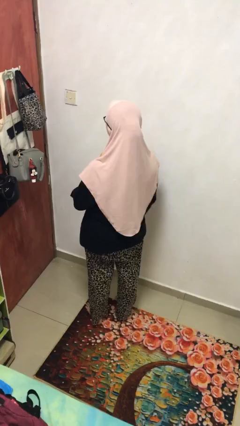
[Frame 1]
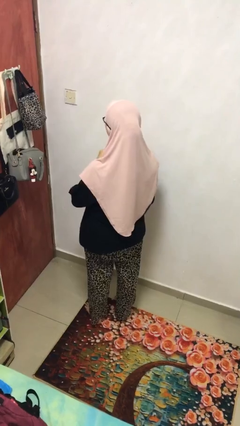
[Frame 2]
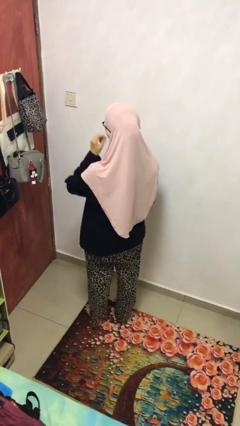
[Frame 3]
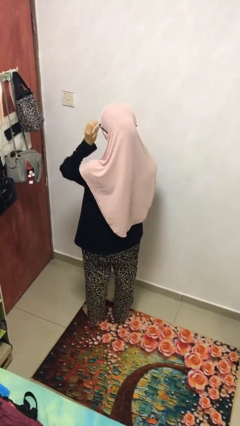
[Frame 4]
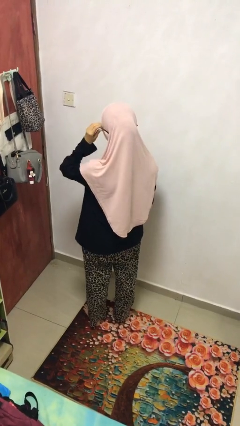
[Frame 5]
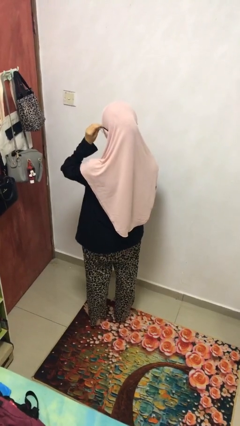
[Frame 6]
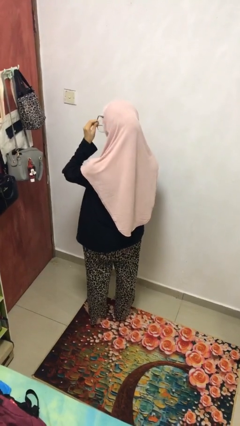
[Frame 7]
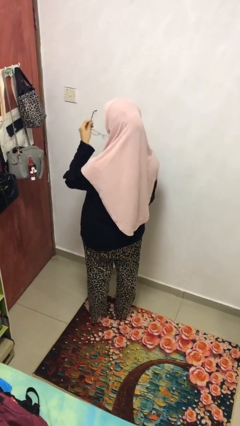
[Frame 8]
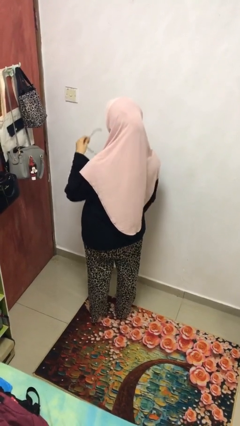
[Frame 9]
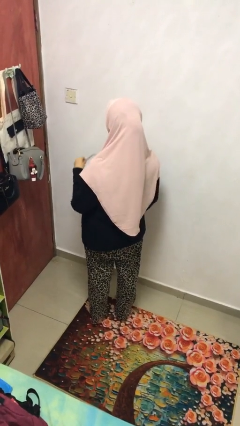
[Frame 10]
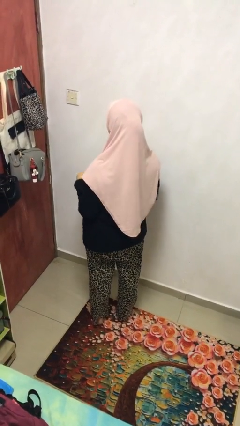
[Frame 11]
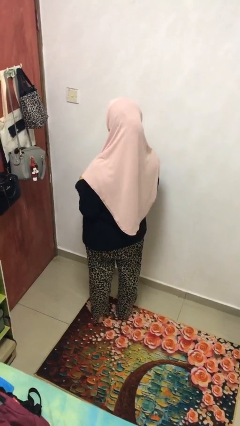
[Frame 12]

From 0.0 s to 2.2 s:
person takes off glasses

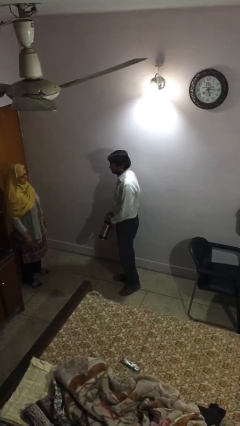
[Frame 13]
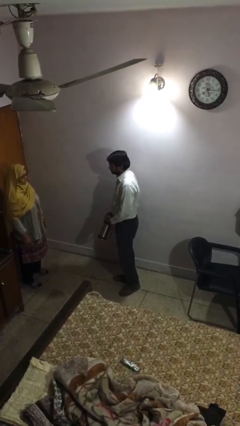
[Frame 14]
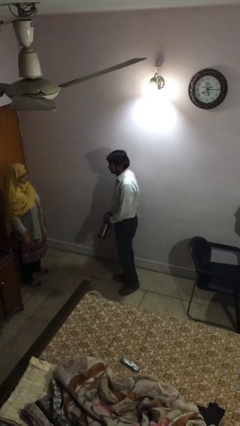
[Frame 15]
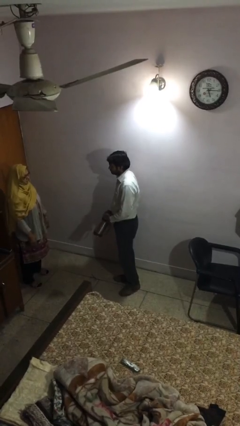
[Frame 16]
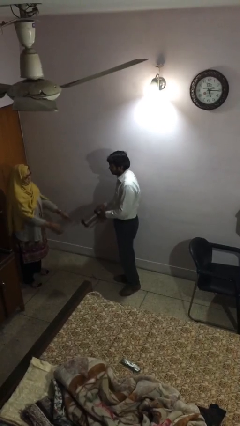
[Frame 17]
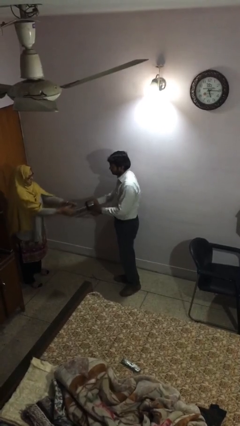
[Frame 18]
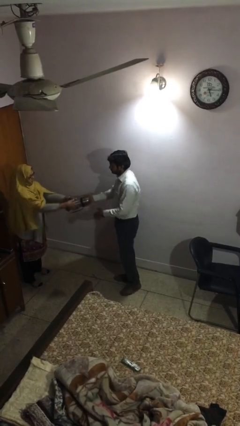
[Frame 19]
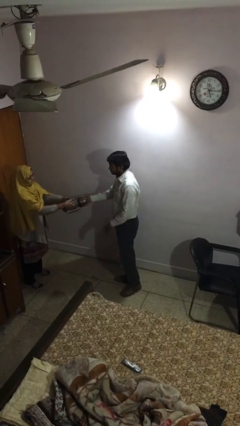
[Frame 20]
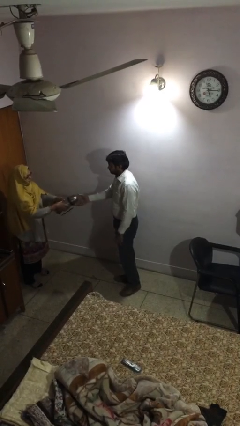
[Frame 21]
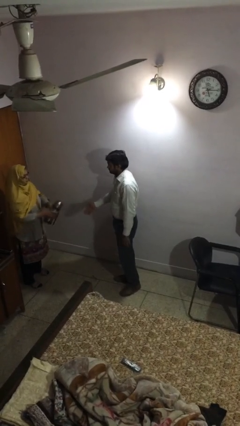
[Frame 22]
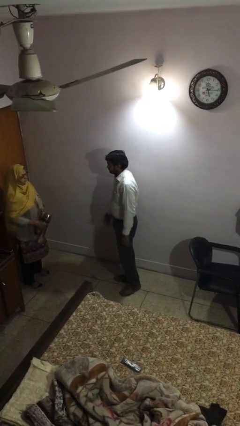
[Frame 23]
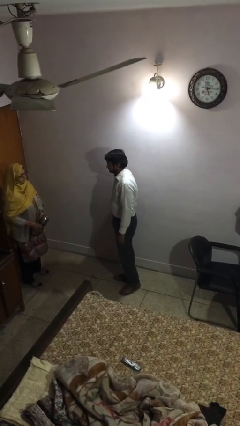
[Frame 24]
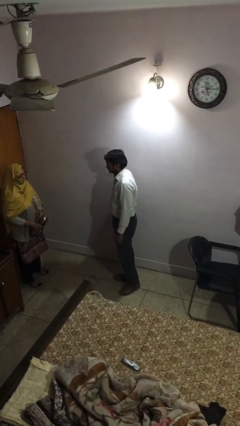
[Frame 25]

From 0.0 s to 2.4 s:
person transfers object to person

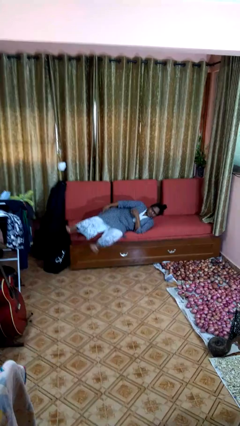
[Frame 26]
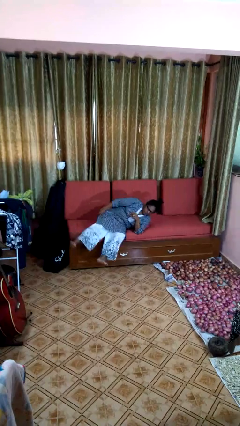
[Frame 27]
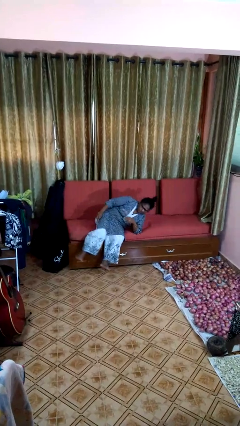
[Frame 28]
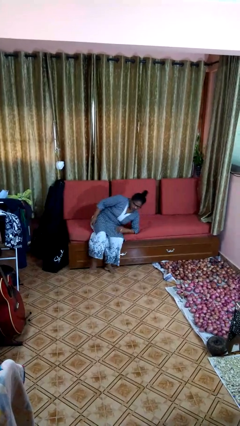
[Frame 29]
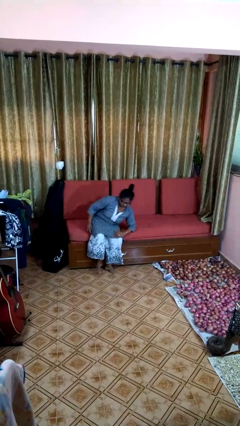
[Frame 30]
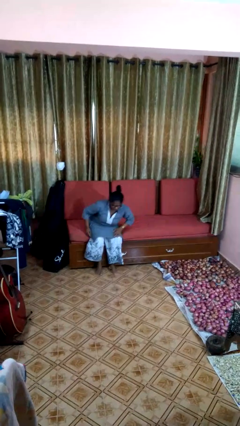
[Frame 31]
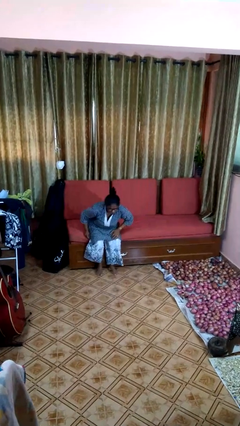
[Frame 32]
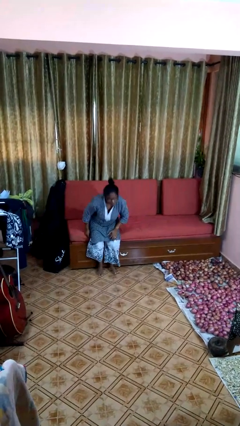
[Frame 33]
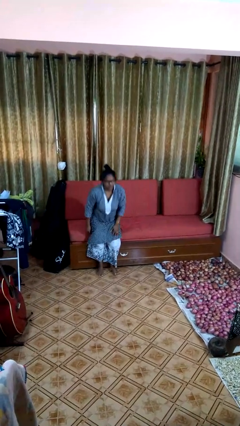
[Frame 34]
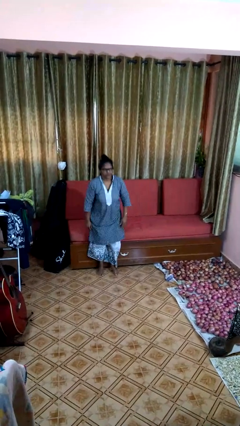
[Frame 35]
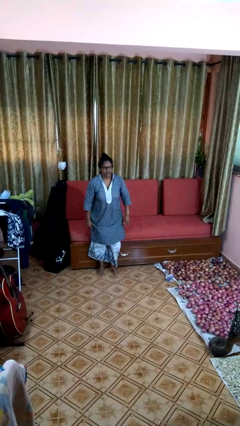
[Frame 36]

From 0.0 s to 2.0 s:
person stands up

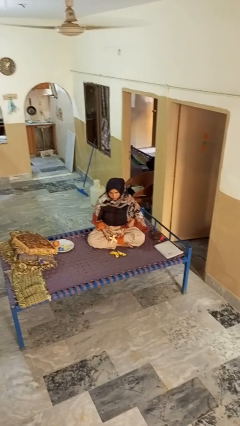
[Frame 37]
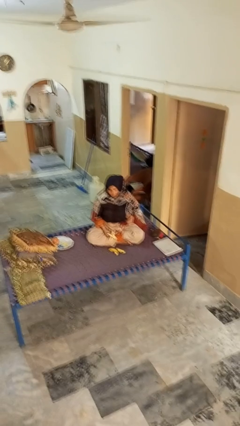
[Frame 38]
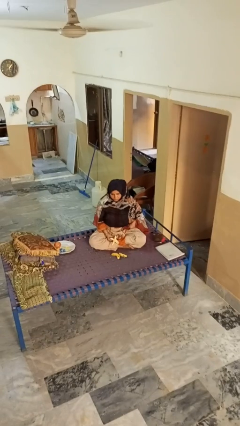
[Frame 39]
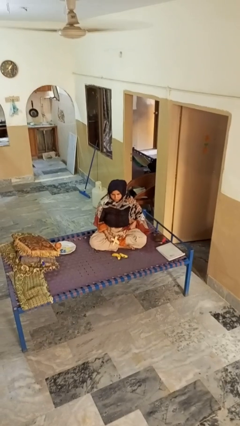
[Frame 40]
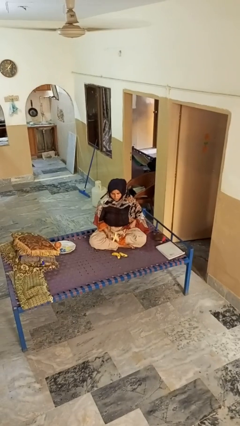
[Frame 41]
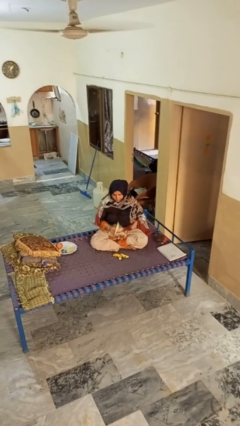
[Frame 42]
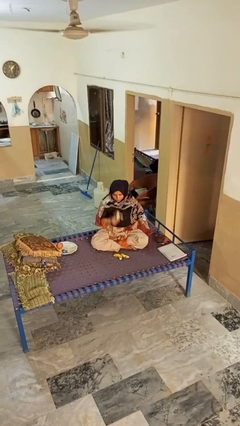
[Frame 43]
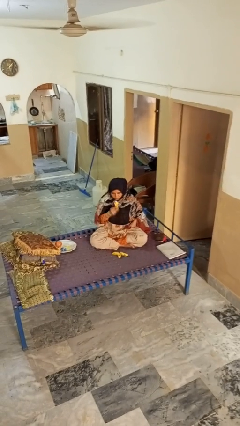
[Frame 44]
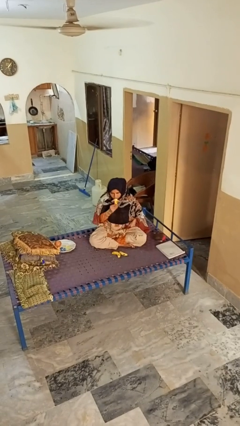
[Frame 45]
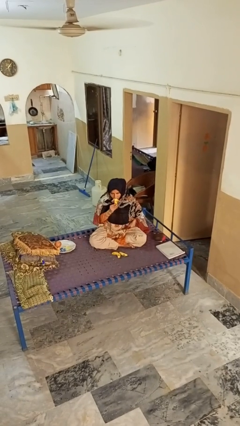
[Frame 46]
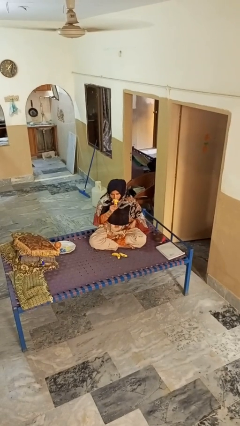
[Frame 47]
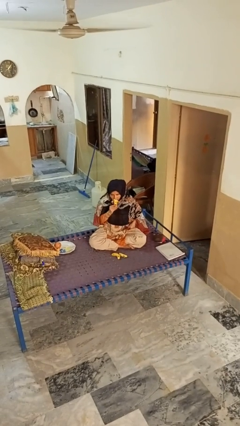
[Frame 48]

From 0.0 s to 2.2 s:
person eats banana

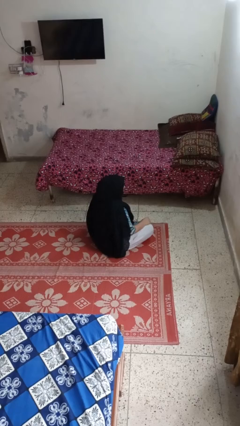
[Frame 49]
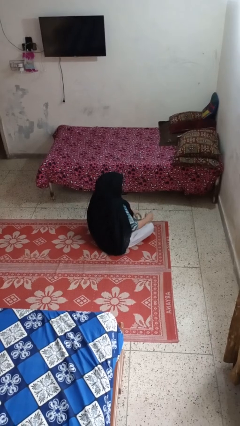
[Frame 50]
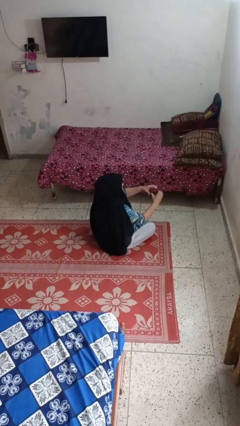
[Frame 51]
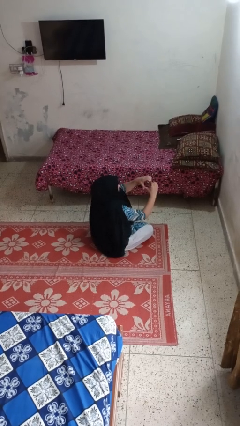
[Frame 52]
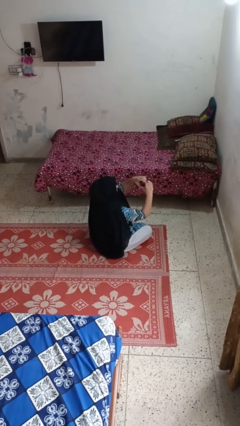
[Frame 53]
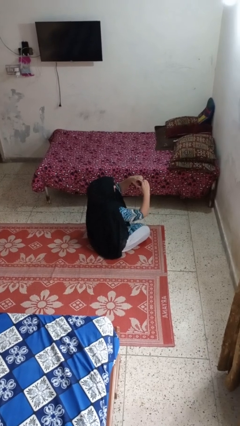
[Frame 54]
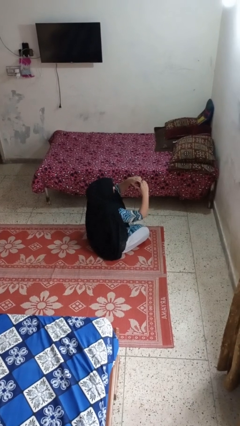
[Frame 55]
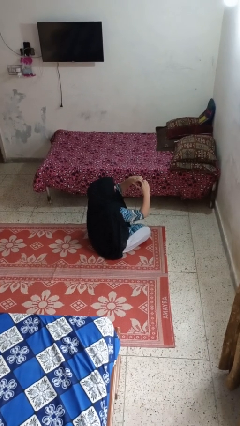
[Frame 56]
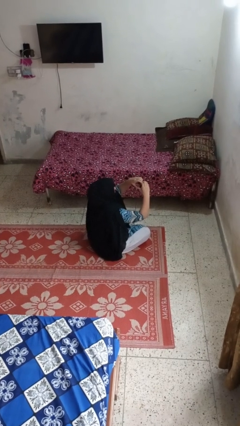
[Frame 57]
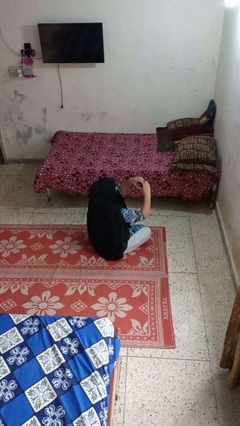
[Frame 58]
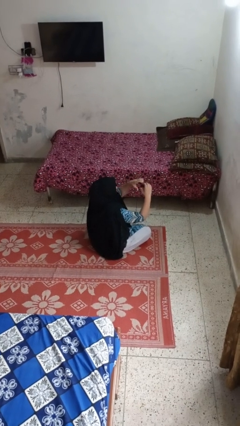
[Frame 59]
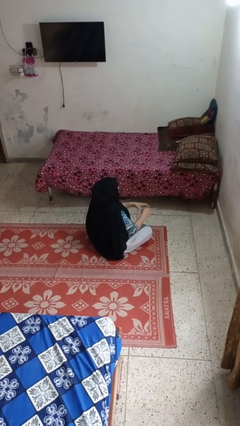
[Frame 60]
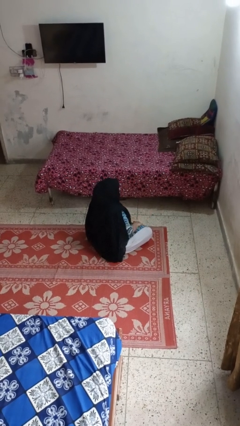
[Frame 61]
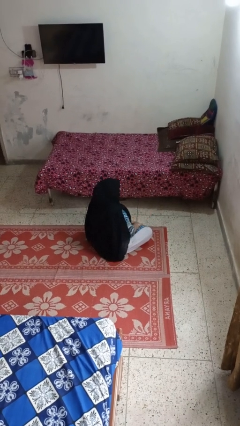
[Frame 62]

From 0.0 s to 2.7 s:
person gestures heart

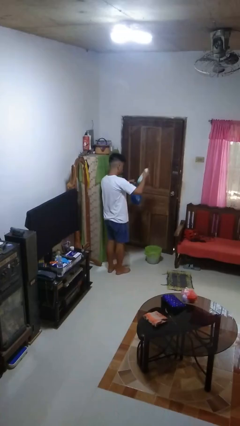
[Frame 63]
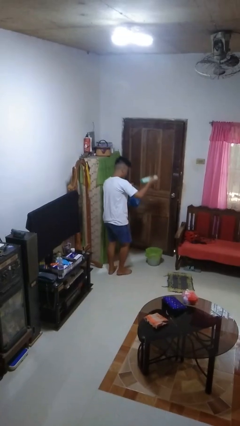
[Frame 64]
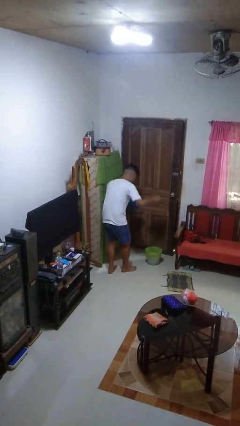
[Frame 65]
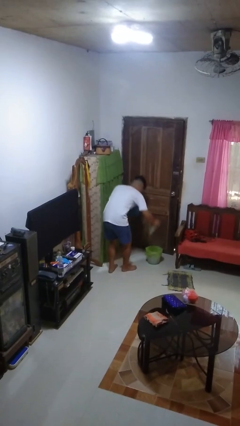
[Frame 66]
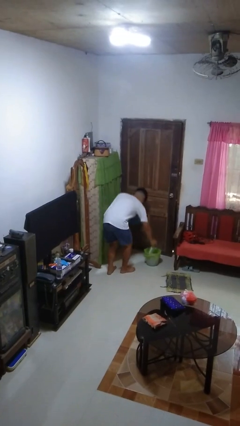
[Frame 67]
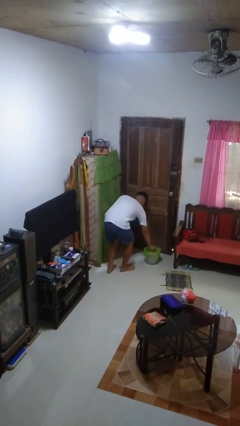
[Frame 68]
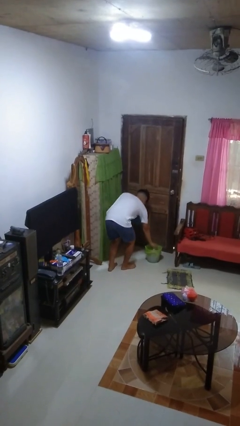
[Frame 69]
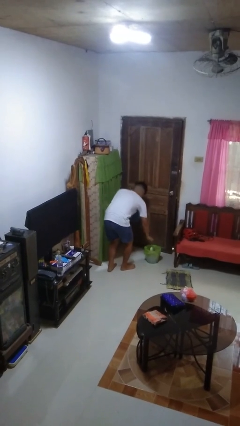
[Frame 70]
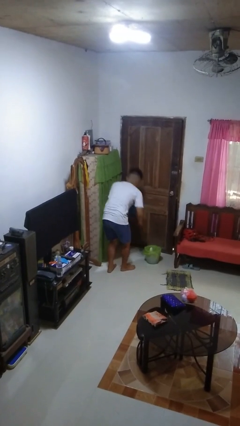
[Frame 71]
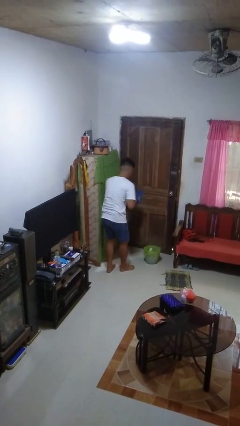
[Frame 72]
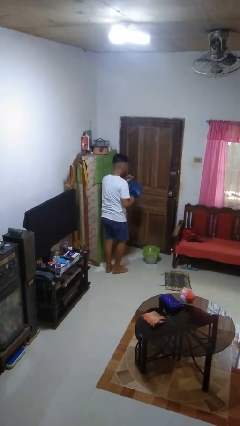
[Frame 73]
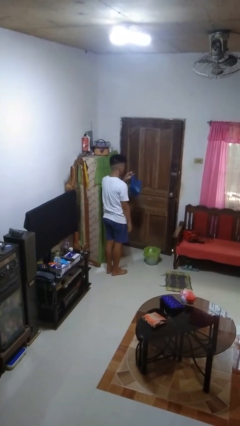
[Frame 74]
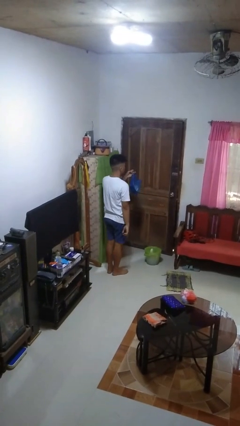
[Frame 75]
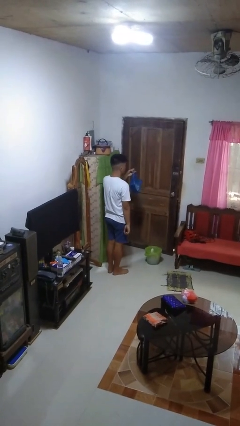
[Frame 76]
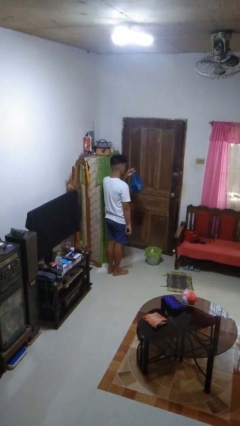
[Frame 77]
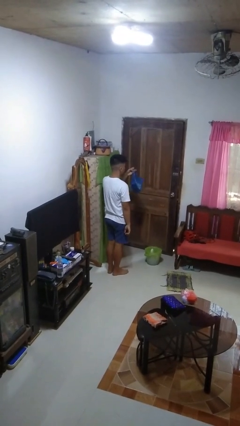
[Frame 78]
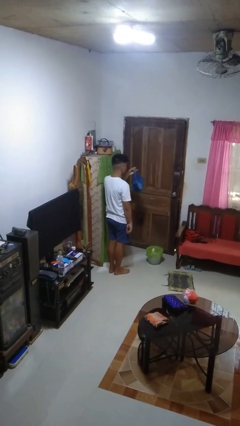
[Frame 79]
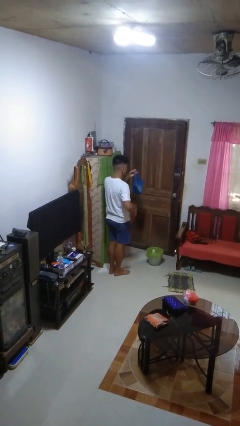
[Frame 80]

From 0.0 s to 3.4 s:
person discards trash

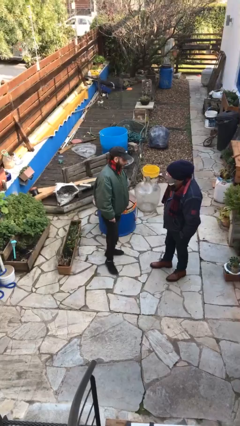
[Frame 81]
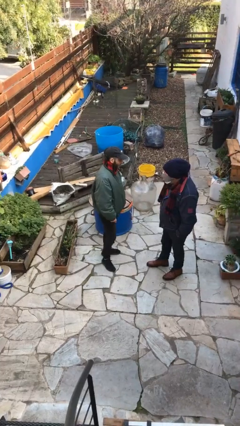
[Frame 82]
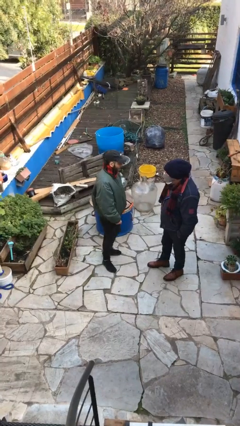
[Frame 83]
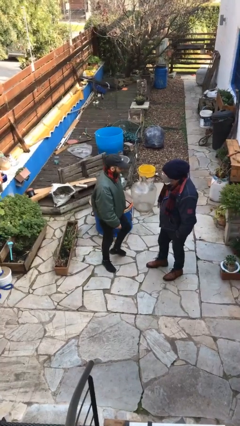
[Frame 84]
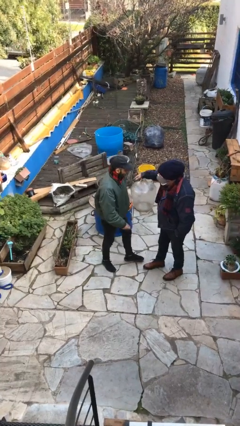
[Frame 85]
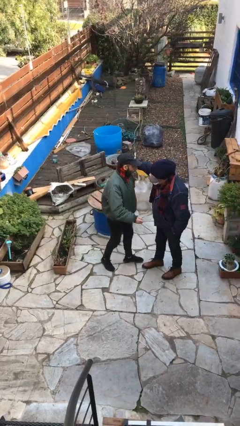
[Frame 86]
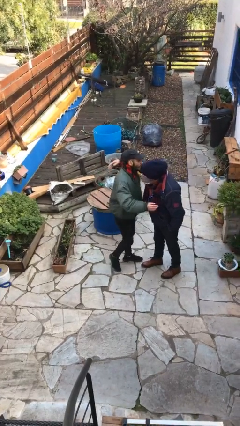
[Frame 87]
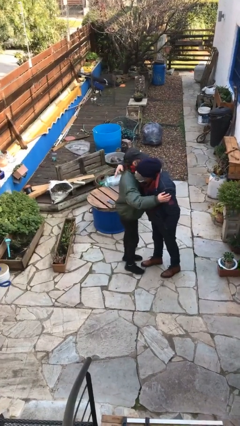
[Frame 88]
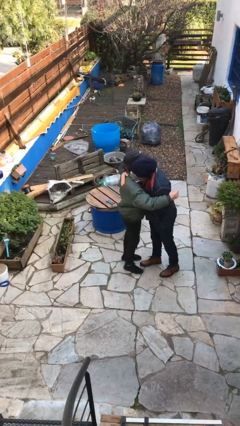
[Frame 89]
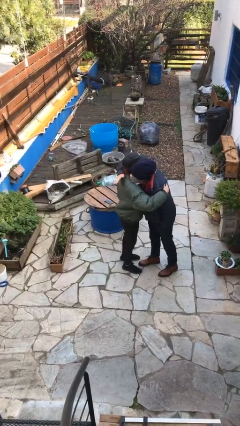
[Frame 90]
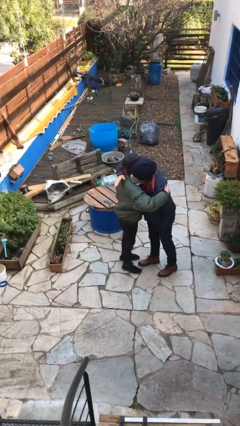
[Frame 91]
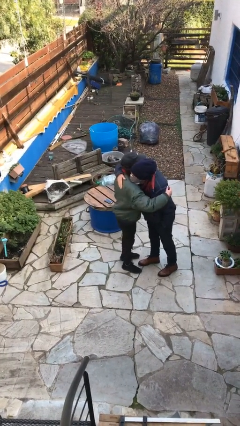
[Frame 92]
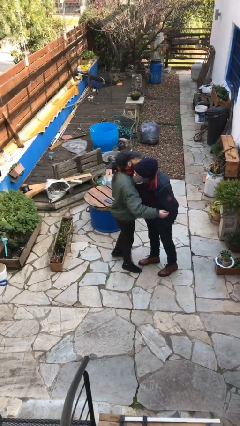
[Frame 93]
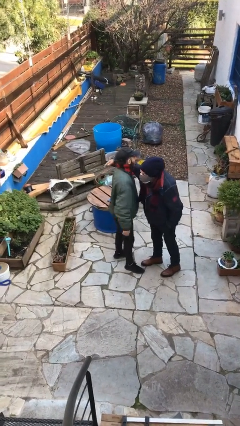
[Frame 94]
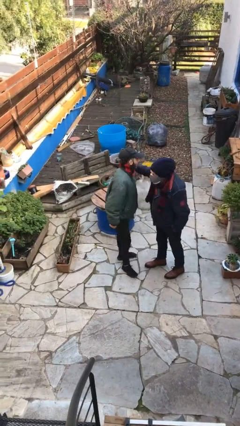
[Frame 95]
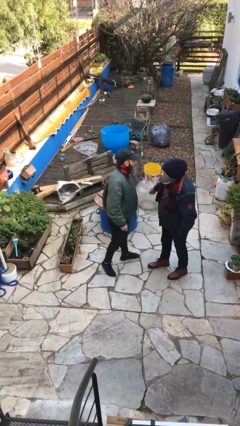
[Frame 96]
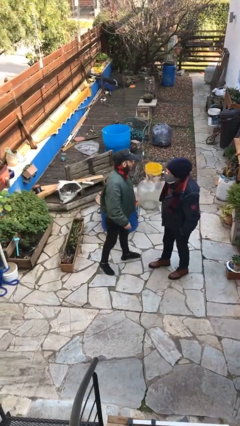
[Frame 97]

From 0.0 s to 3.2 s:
person kisses cheek of person
